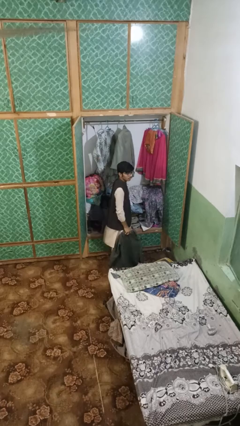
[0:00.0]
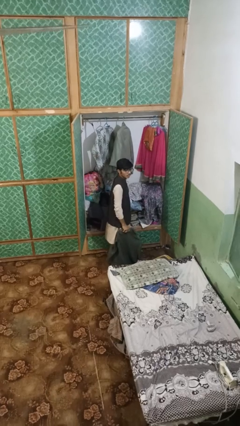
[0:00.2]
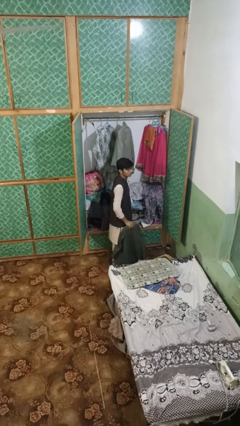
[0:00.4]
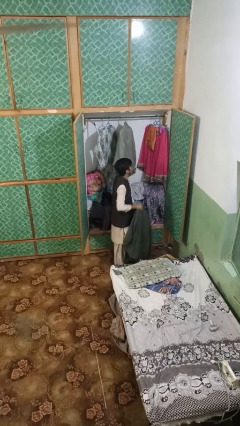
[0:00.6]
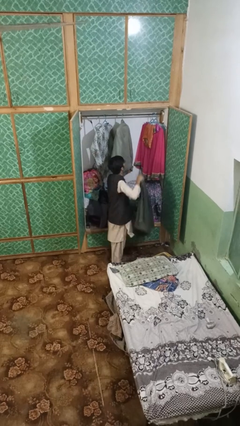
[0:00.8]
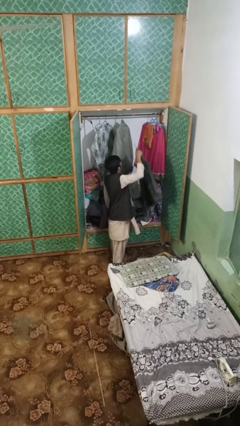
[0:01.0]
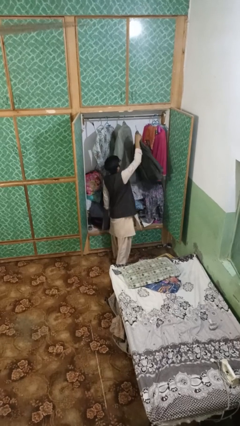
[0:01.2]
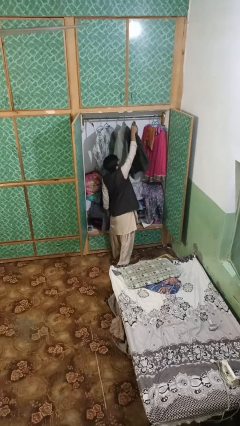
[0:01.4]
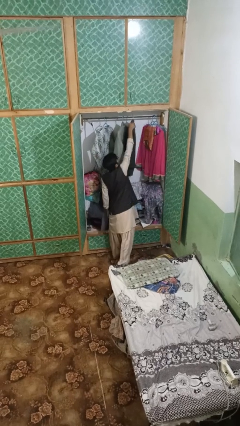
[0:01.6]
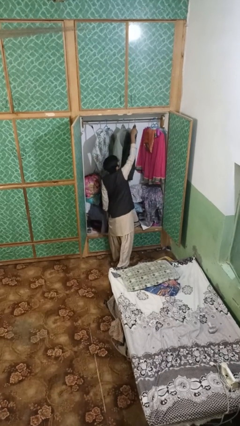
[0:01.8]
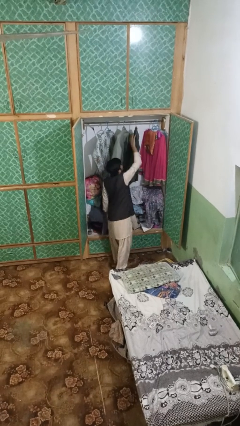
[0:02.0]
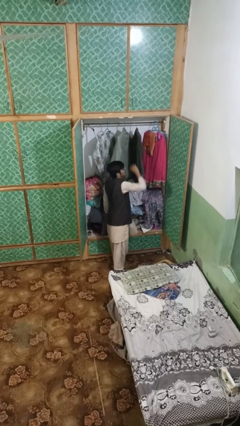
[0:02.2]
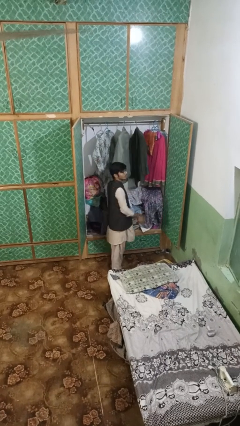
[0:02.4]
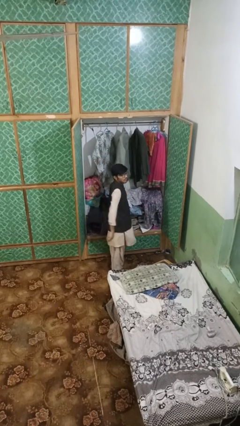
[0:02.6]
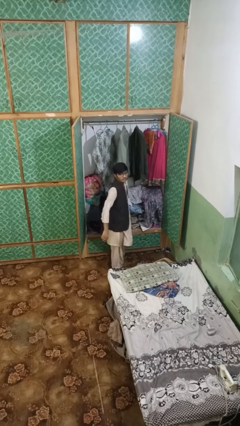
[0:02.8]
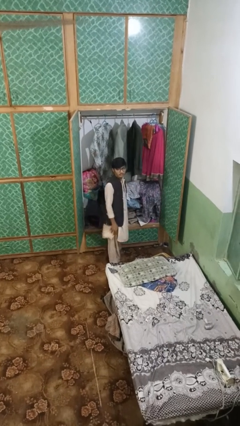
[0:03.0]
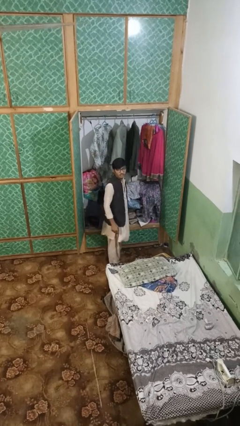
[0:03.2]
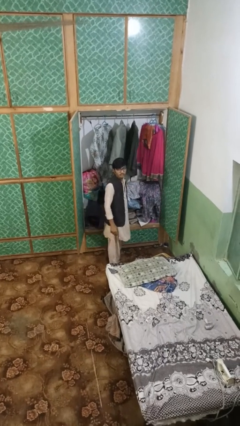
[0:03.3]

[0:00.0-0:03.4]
person puts clothes into closet

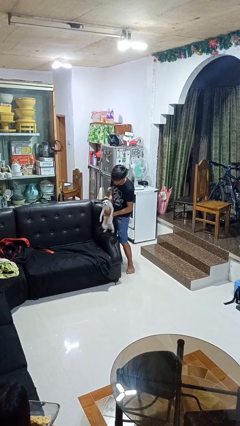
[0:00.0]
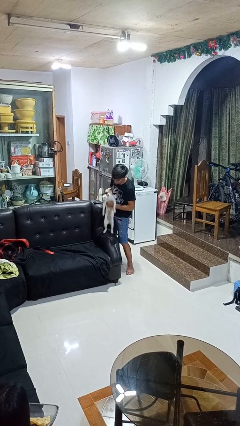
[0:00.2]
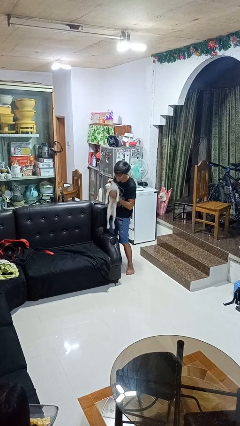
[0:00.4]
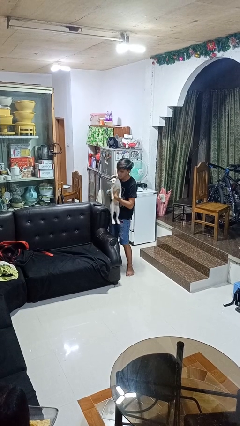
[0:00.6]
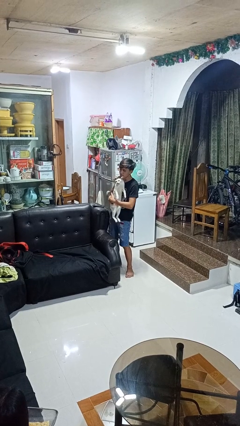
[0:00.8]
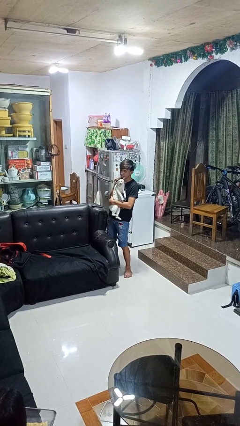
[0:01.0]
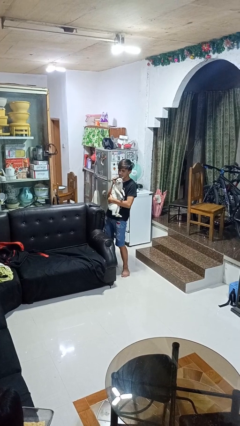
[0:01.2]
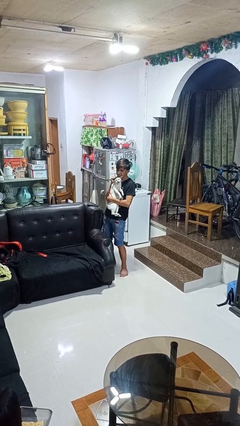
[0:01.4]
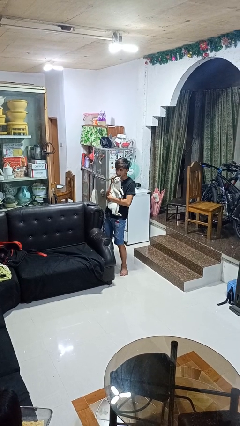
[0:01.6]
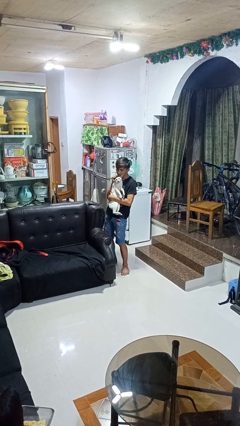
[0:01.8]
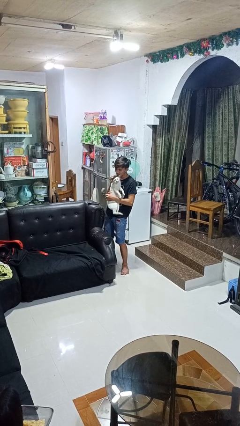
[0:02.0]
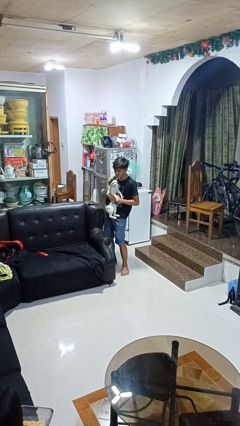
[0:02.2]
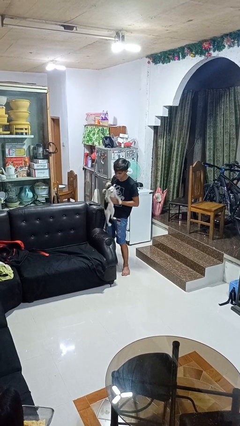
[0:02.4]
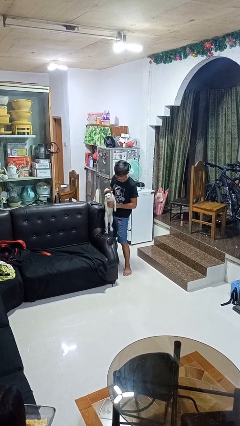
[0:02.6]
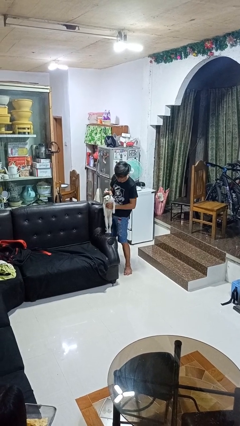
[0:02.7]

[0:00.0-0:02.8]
person hugs cat

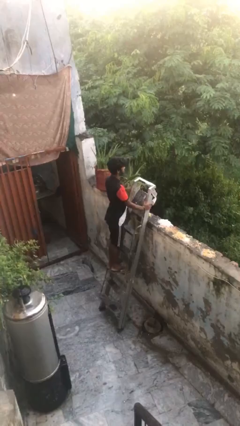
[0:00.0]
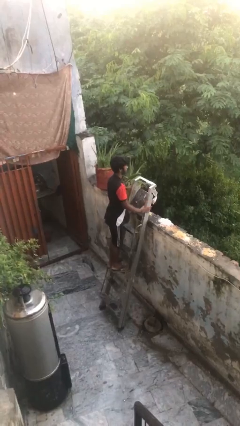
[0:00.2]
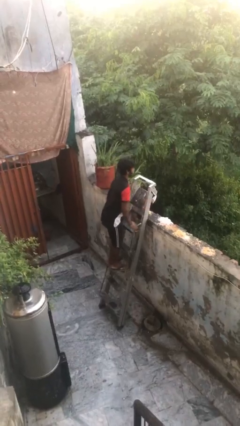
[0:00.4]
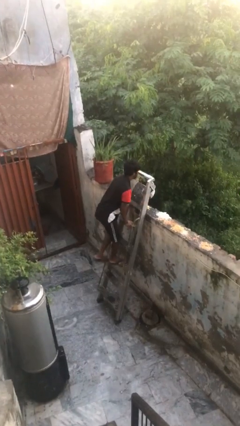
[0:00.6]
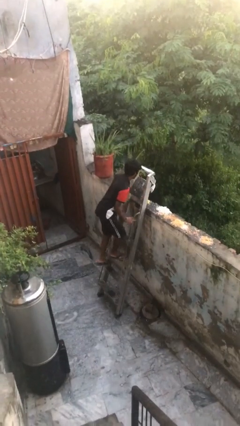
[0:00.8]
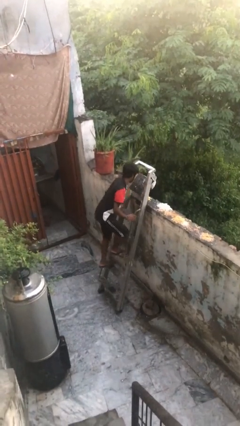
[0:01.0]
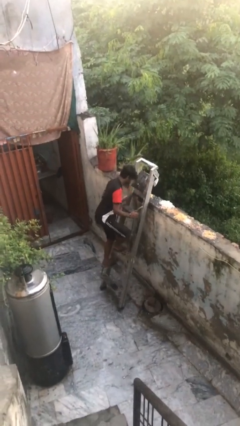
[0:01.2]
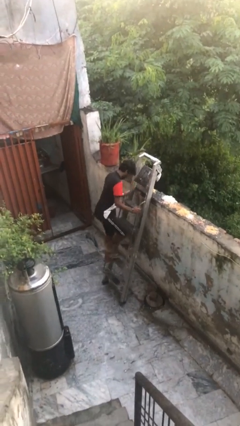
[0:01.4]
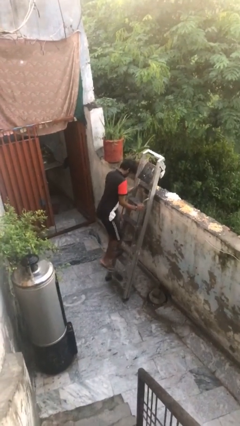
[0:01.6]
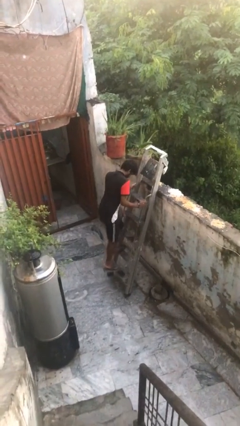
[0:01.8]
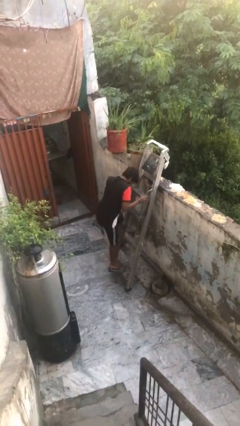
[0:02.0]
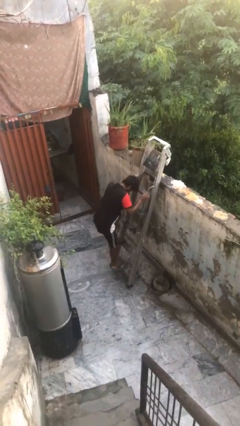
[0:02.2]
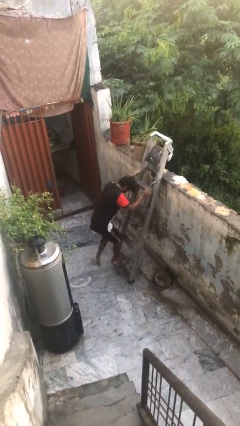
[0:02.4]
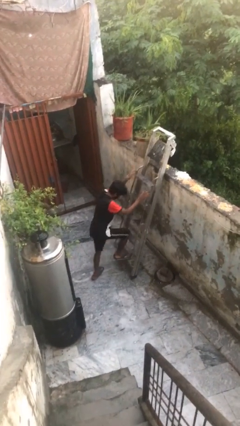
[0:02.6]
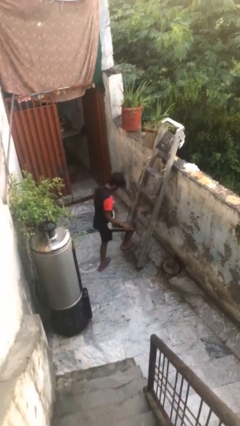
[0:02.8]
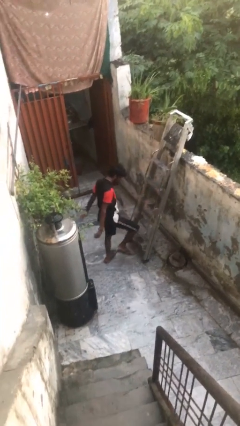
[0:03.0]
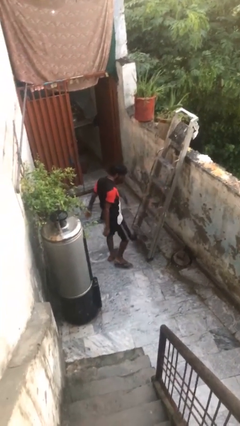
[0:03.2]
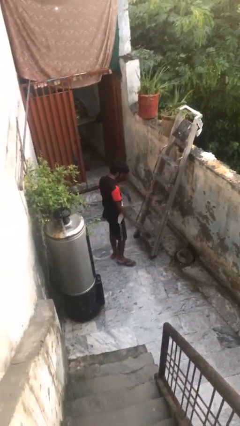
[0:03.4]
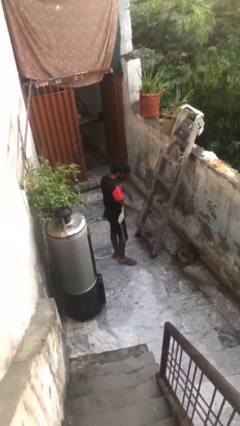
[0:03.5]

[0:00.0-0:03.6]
person climbs down ladder

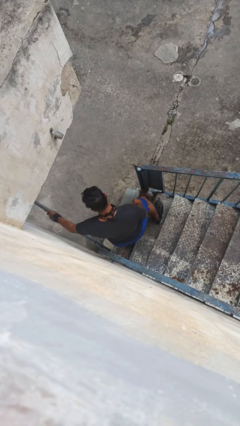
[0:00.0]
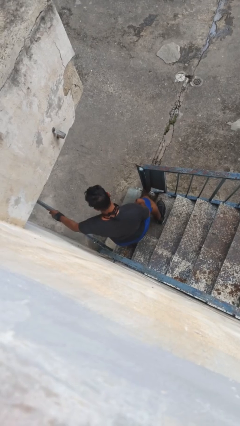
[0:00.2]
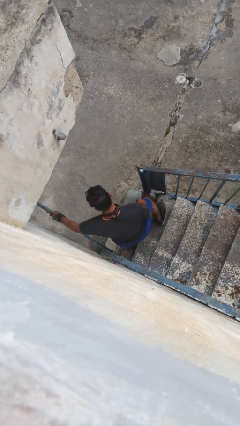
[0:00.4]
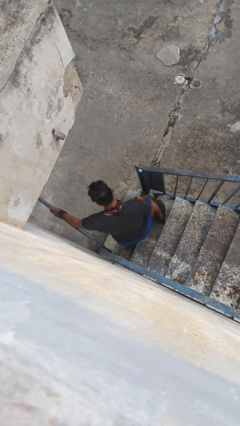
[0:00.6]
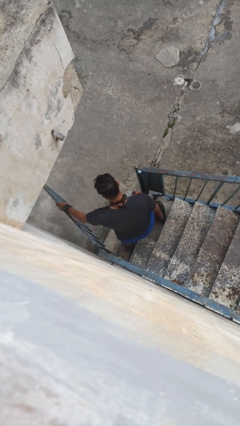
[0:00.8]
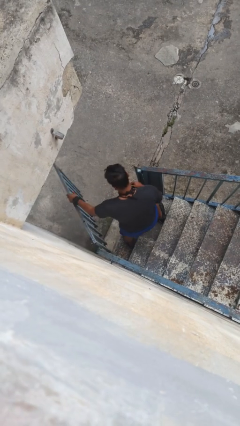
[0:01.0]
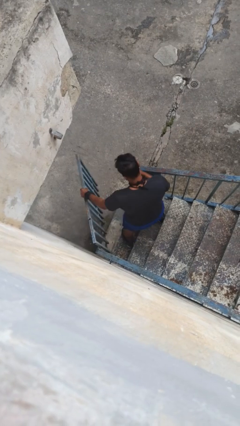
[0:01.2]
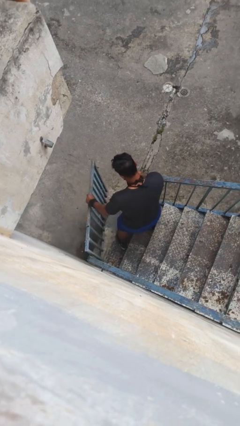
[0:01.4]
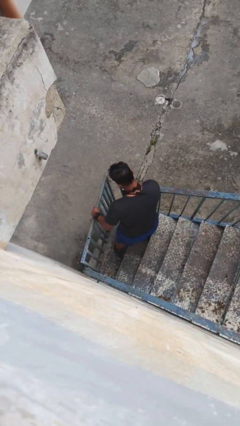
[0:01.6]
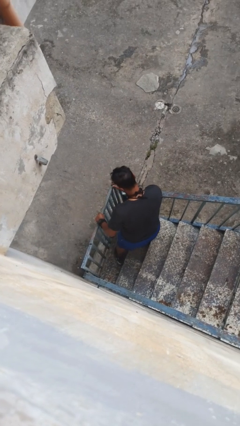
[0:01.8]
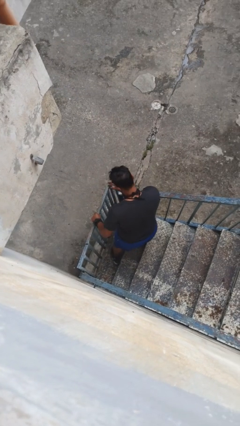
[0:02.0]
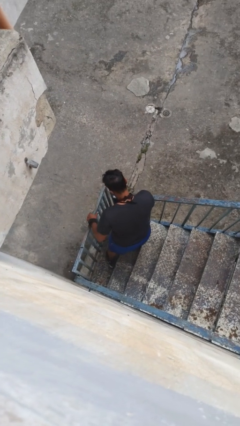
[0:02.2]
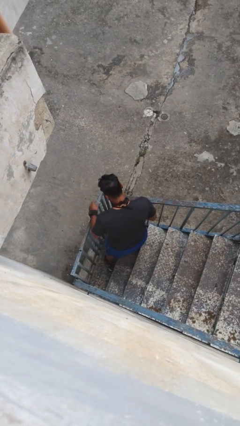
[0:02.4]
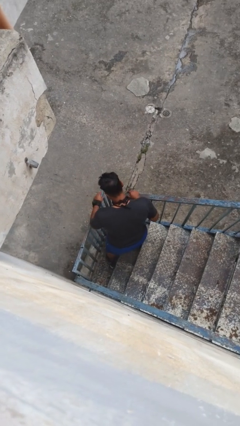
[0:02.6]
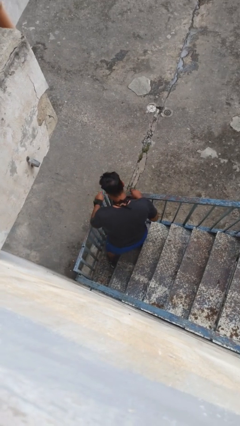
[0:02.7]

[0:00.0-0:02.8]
person closes facility door

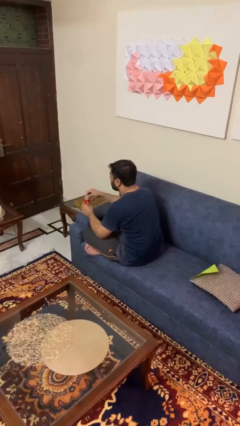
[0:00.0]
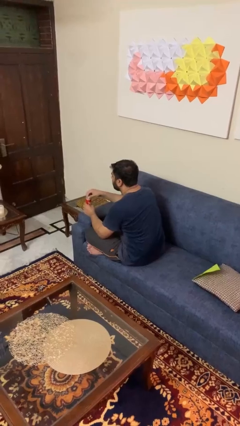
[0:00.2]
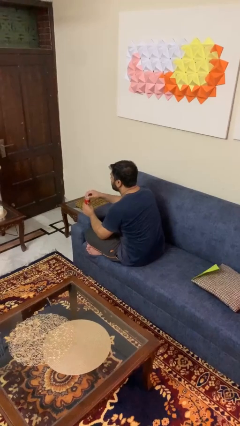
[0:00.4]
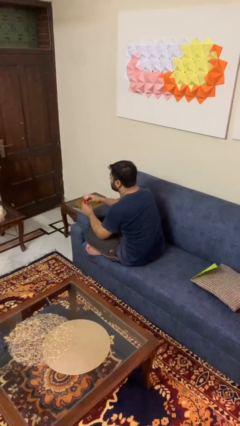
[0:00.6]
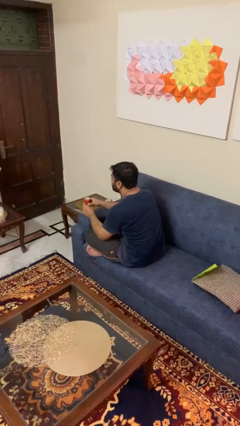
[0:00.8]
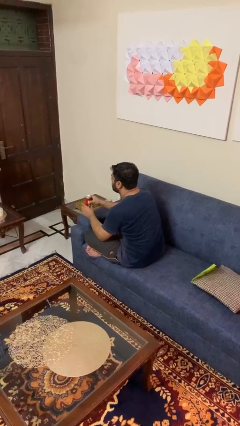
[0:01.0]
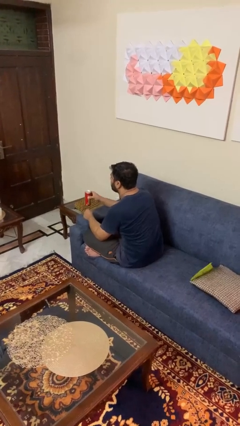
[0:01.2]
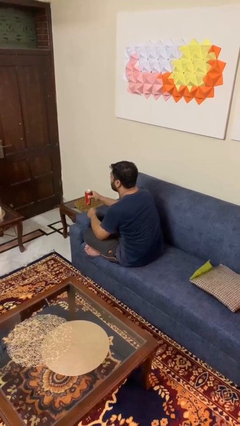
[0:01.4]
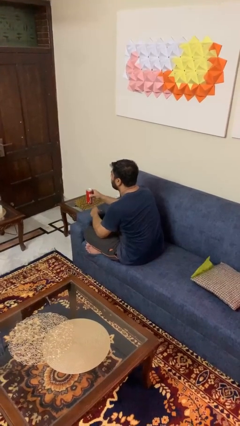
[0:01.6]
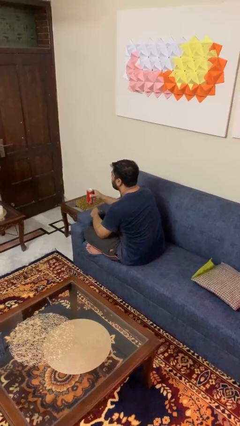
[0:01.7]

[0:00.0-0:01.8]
person opens beverage can

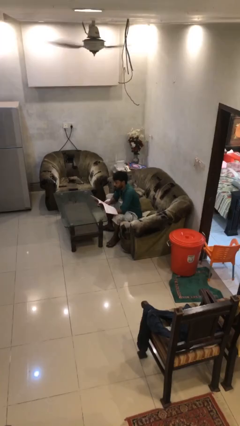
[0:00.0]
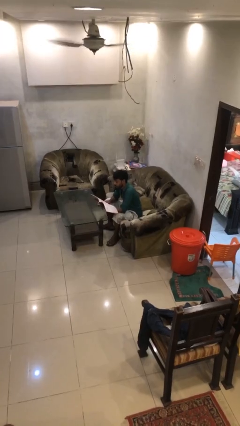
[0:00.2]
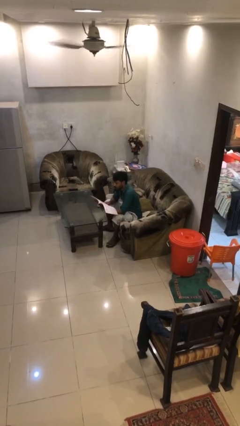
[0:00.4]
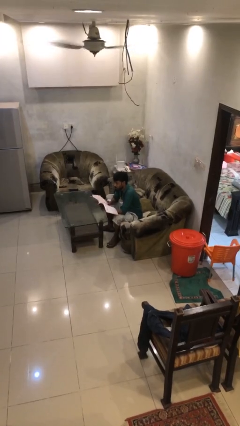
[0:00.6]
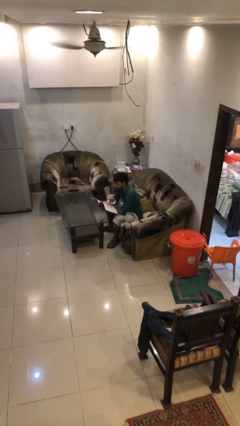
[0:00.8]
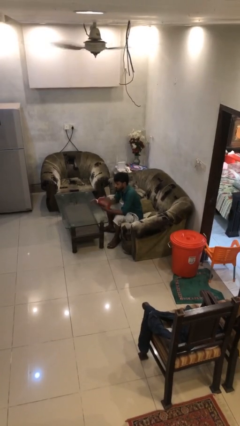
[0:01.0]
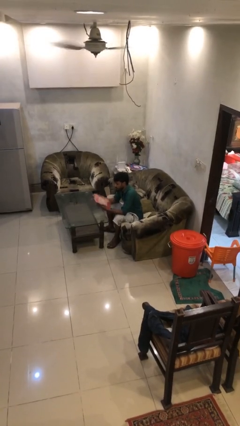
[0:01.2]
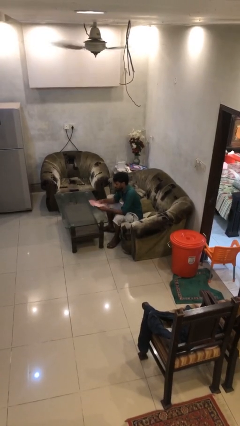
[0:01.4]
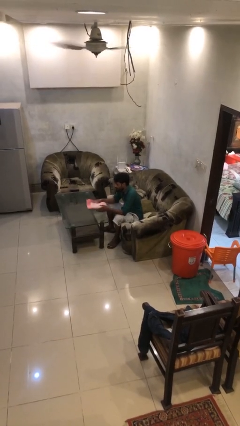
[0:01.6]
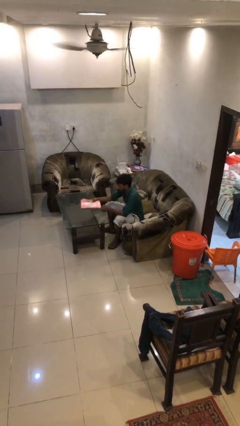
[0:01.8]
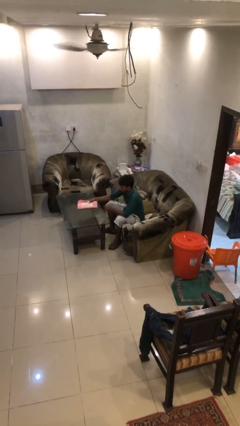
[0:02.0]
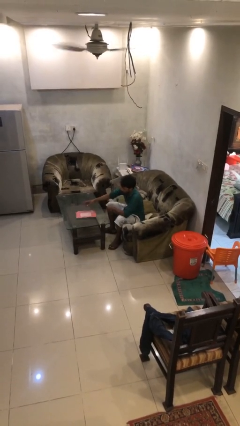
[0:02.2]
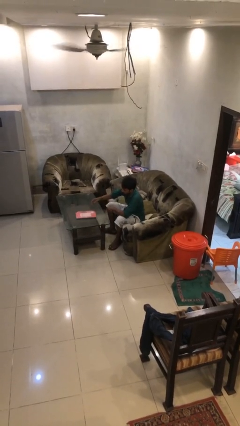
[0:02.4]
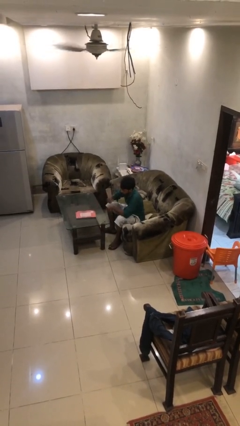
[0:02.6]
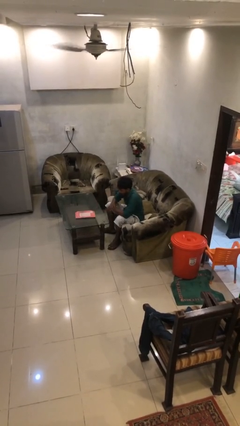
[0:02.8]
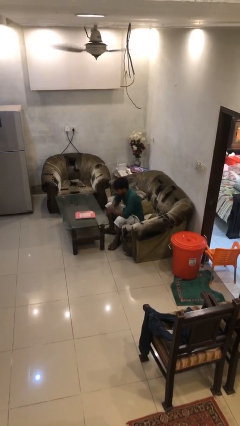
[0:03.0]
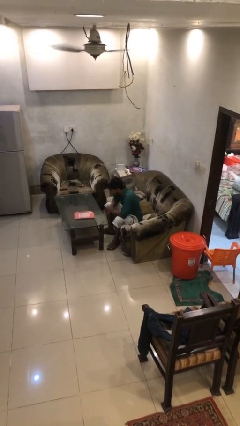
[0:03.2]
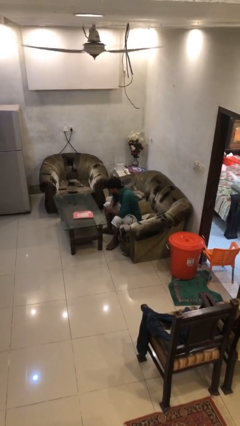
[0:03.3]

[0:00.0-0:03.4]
person puts down object on table
